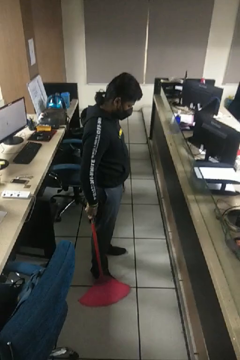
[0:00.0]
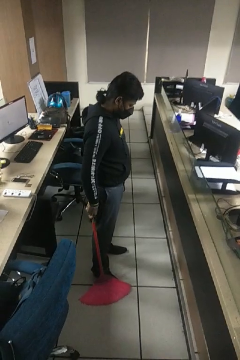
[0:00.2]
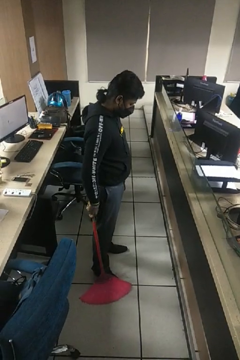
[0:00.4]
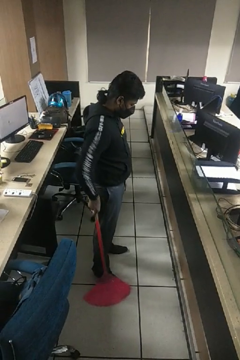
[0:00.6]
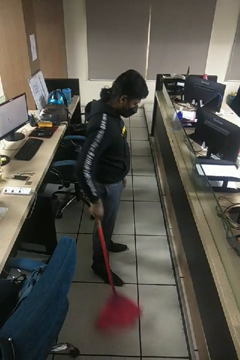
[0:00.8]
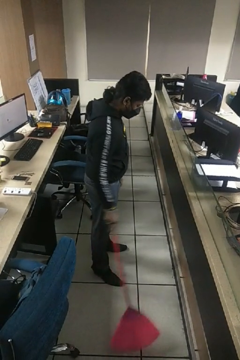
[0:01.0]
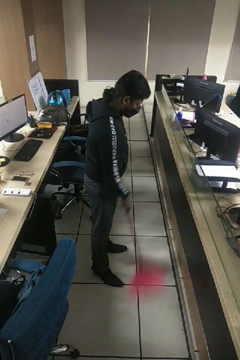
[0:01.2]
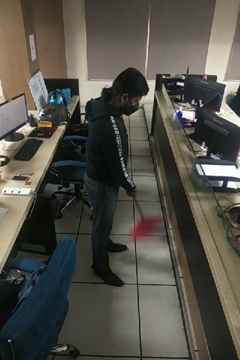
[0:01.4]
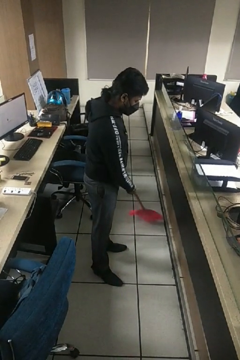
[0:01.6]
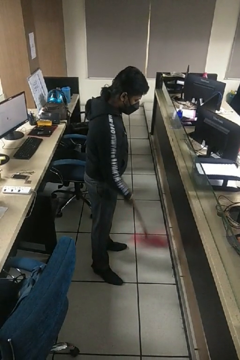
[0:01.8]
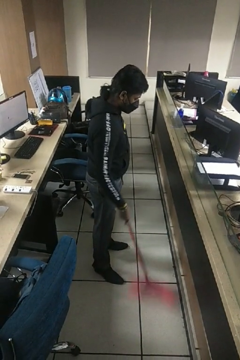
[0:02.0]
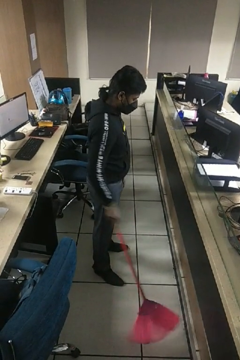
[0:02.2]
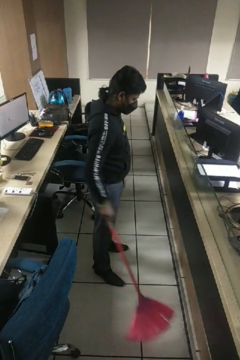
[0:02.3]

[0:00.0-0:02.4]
person sweeps floor

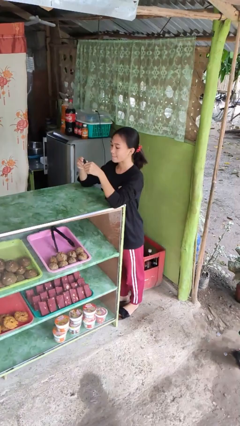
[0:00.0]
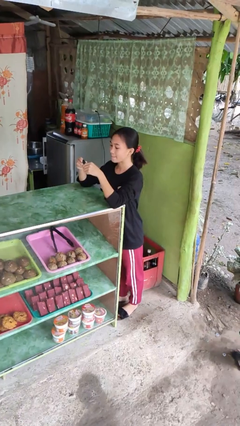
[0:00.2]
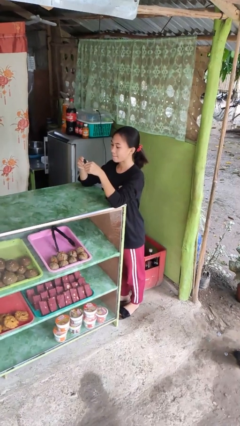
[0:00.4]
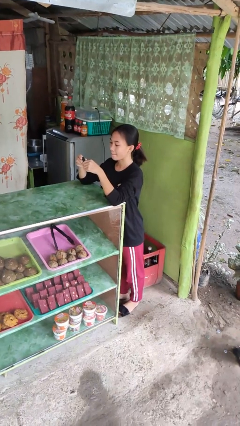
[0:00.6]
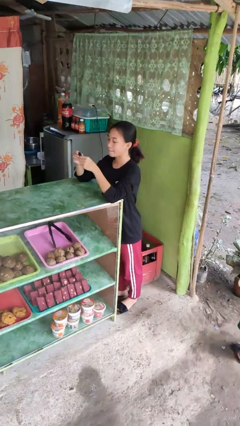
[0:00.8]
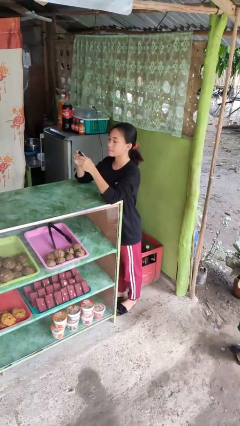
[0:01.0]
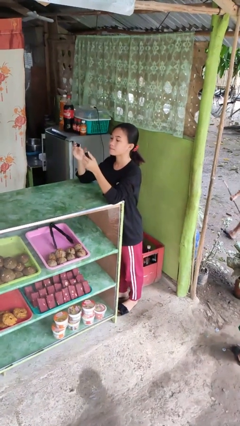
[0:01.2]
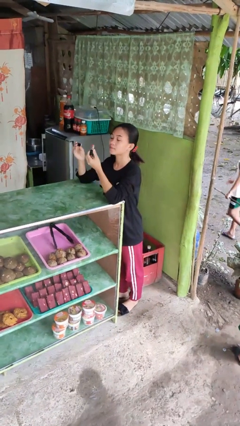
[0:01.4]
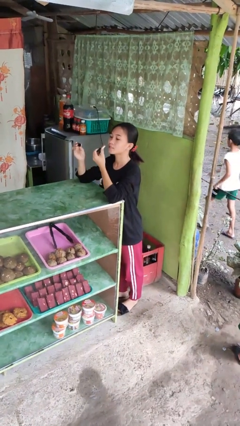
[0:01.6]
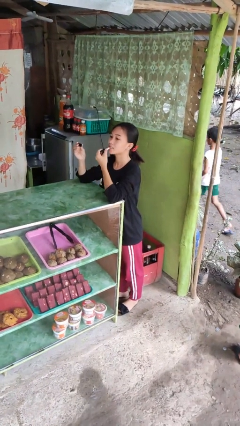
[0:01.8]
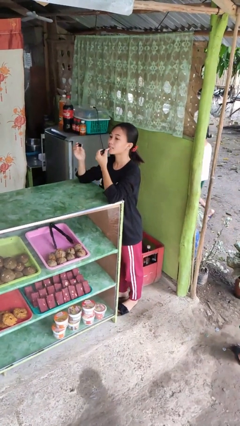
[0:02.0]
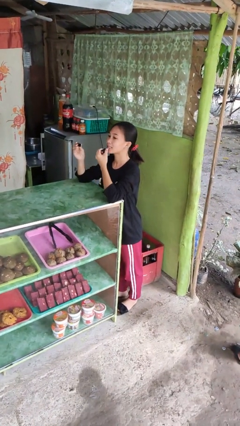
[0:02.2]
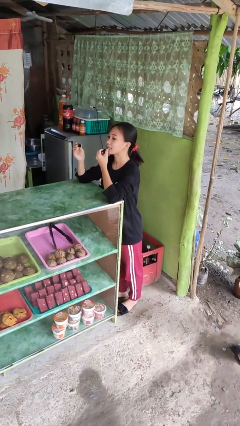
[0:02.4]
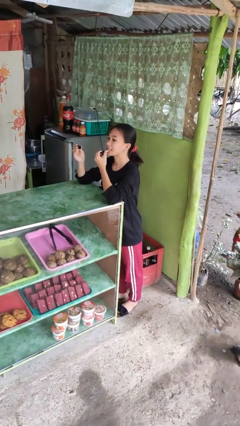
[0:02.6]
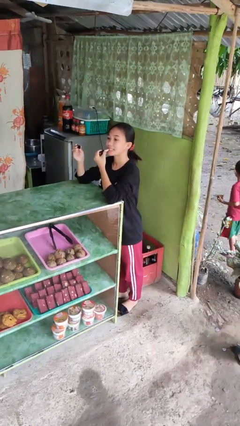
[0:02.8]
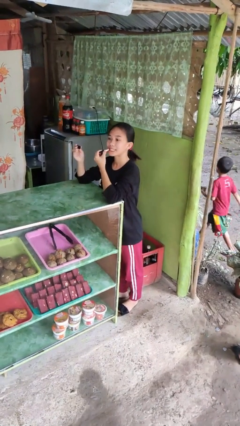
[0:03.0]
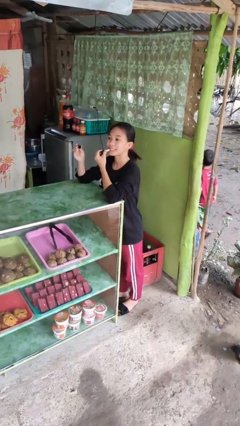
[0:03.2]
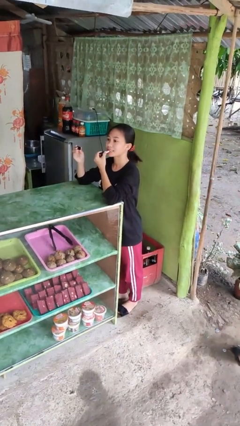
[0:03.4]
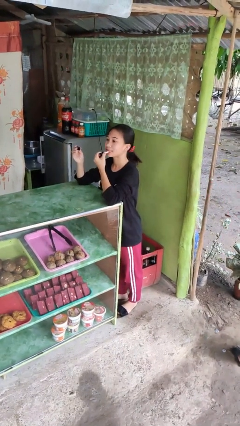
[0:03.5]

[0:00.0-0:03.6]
person applies lip makeup

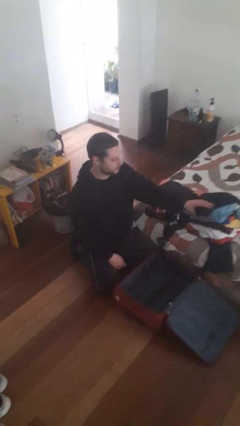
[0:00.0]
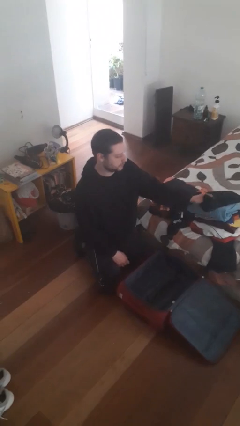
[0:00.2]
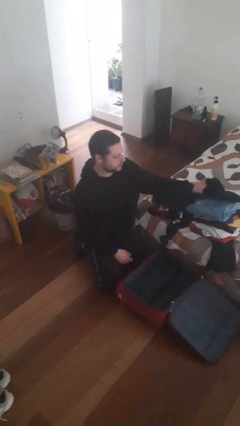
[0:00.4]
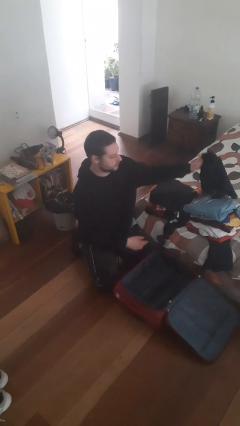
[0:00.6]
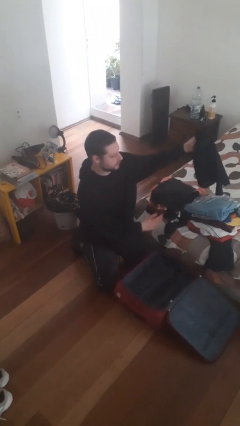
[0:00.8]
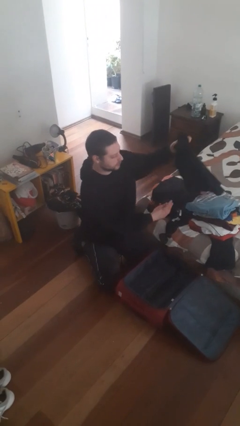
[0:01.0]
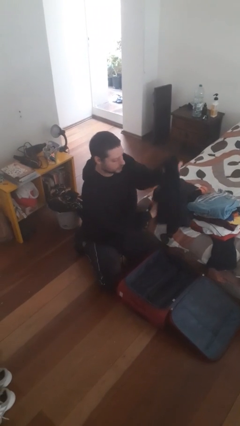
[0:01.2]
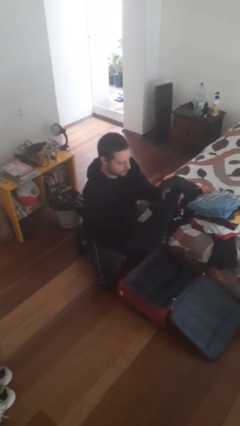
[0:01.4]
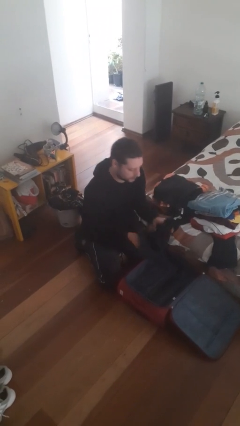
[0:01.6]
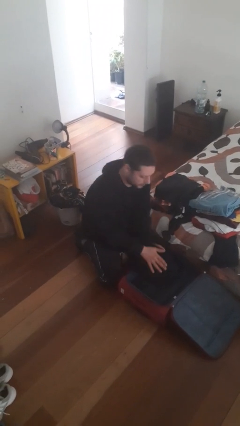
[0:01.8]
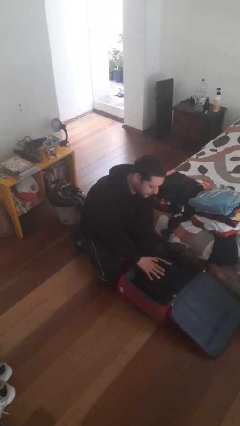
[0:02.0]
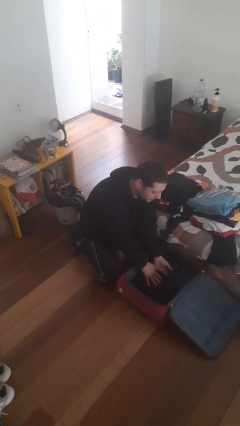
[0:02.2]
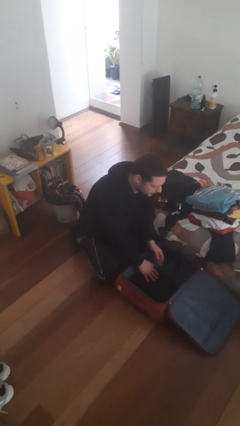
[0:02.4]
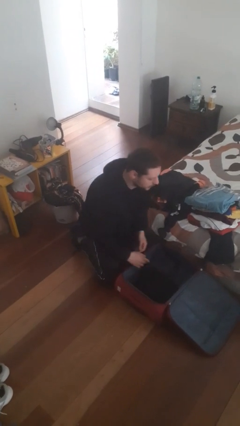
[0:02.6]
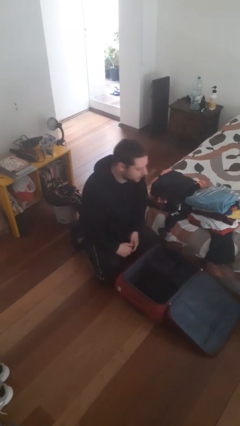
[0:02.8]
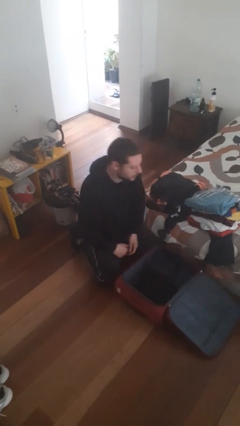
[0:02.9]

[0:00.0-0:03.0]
person loads clothes into suitcase

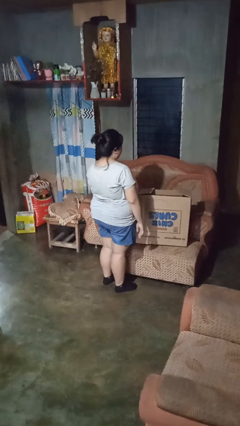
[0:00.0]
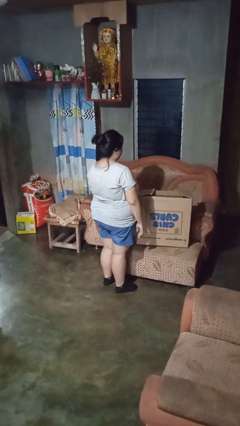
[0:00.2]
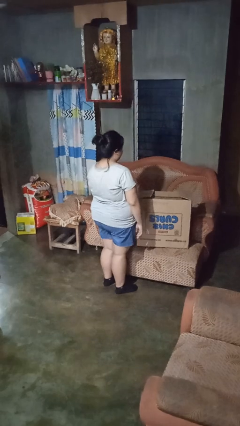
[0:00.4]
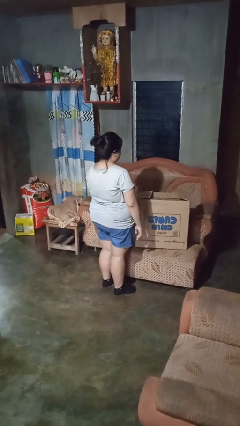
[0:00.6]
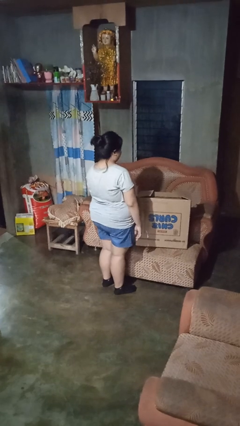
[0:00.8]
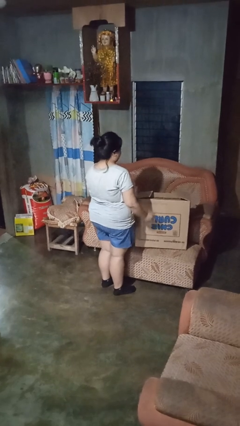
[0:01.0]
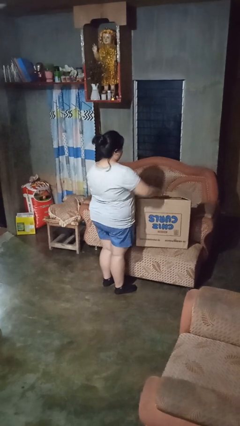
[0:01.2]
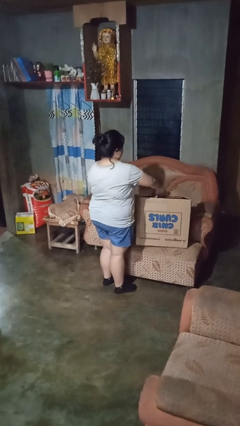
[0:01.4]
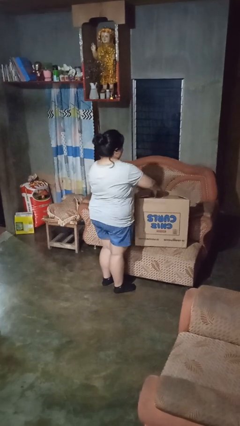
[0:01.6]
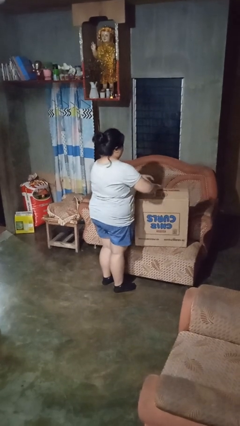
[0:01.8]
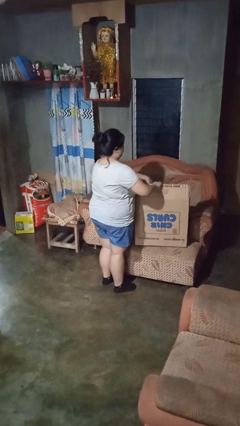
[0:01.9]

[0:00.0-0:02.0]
person opens box

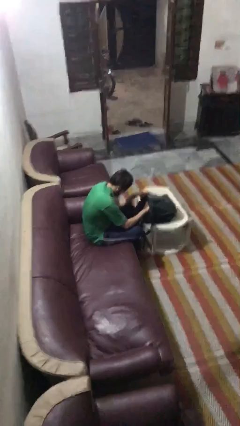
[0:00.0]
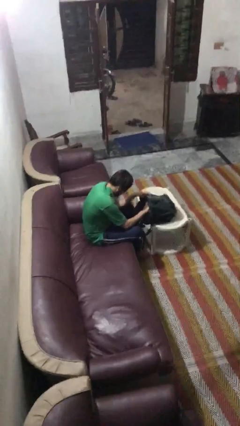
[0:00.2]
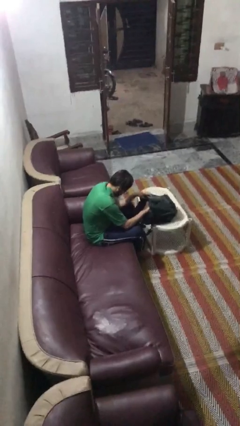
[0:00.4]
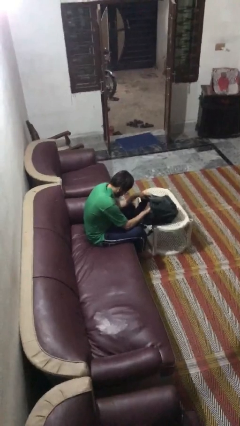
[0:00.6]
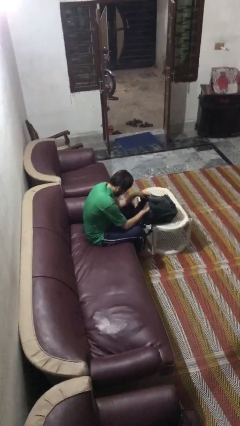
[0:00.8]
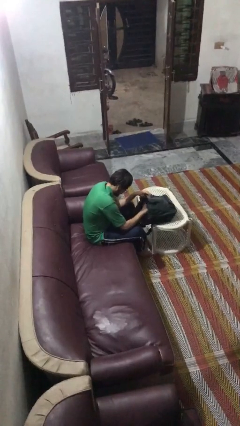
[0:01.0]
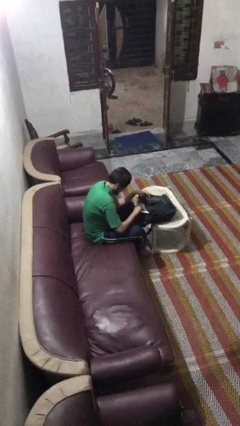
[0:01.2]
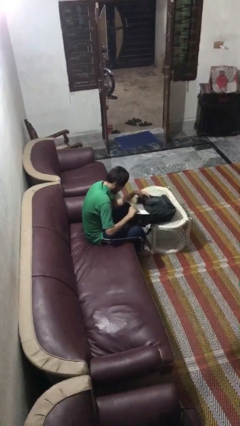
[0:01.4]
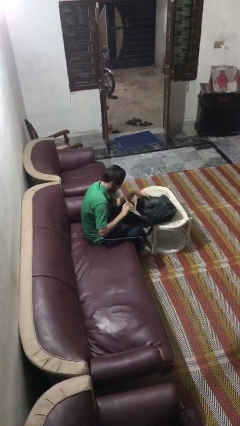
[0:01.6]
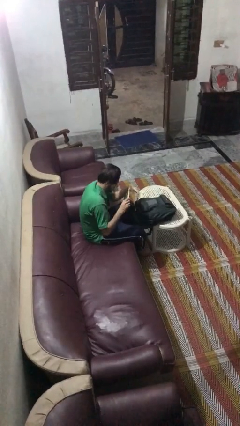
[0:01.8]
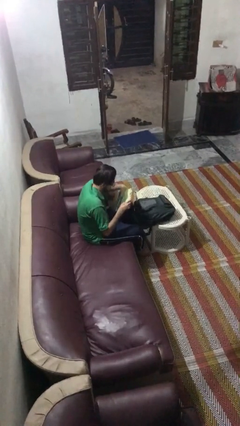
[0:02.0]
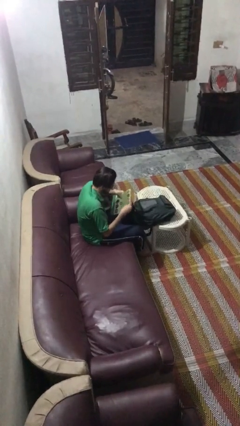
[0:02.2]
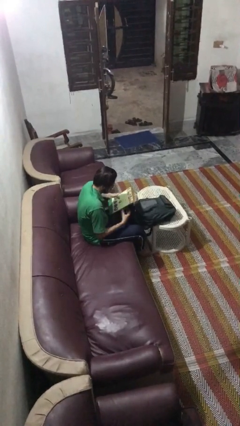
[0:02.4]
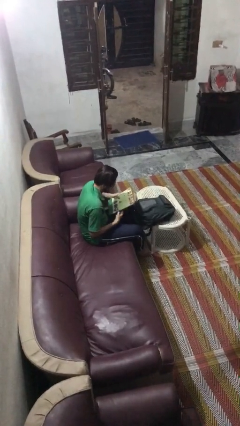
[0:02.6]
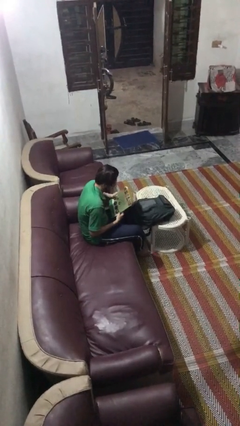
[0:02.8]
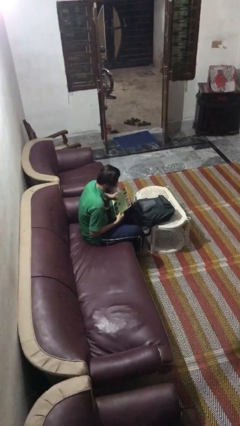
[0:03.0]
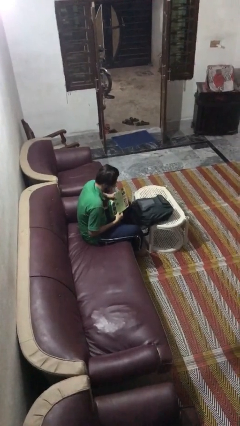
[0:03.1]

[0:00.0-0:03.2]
person takes object from backpack

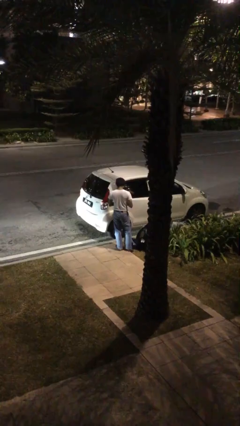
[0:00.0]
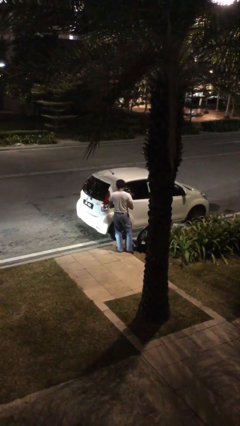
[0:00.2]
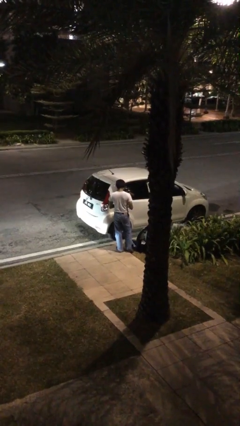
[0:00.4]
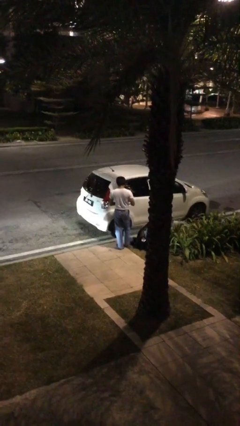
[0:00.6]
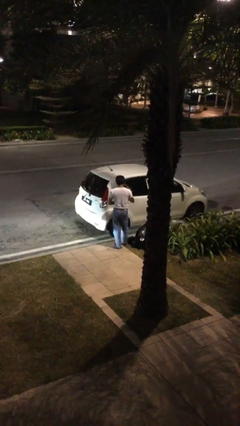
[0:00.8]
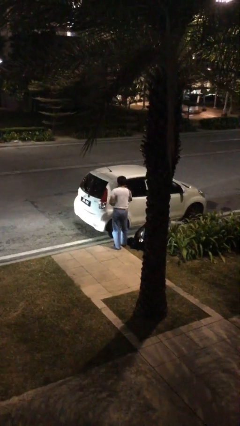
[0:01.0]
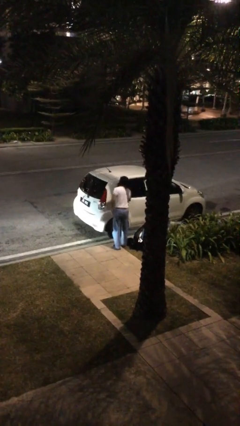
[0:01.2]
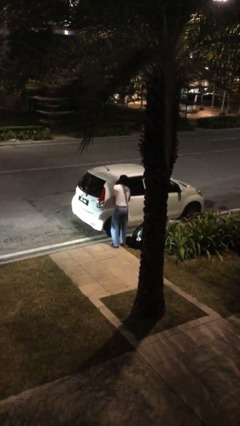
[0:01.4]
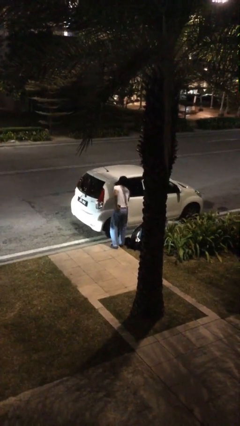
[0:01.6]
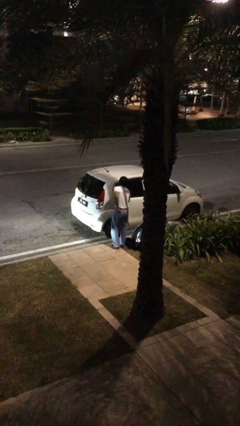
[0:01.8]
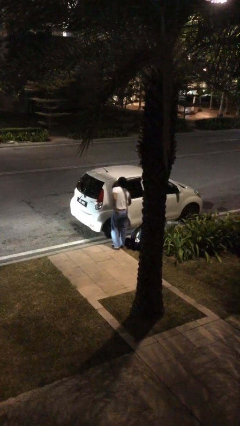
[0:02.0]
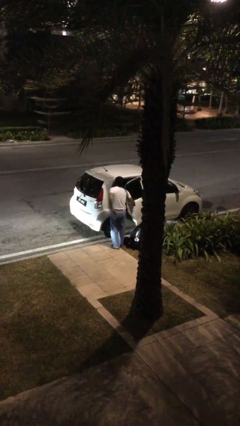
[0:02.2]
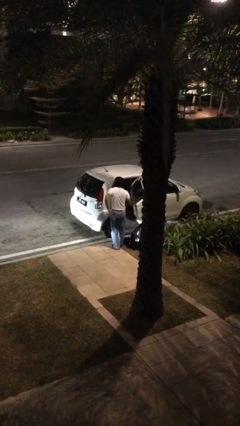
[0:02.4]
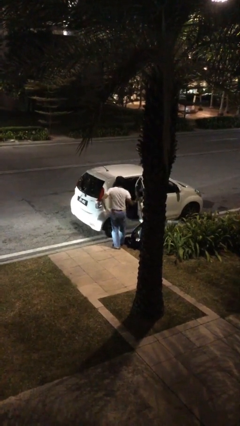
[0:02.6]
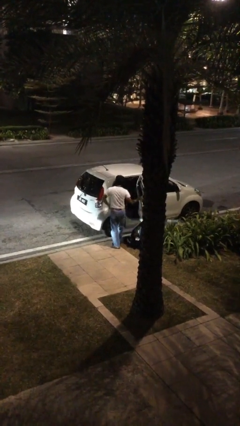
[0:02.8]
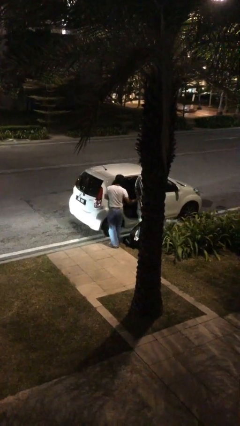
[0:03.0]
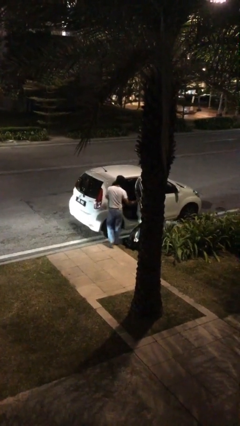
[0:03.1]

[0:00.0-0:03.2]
person opens car door

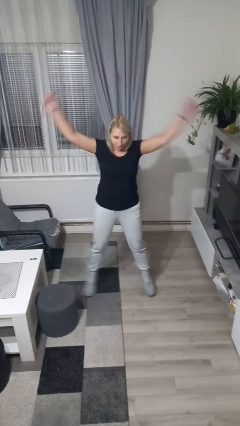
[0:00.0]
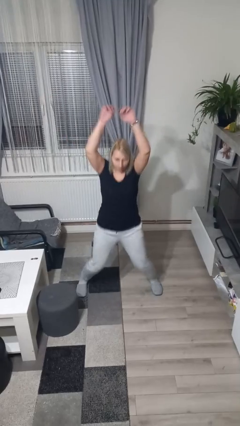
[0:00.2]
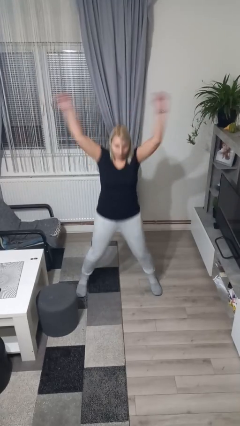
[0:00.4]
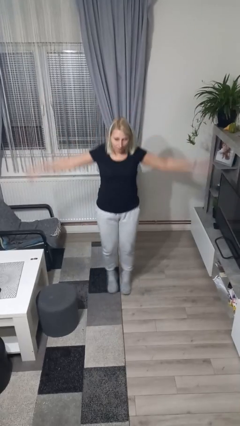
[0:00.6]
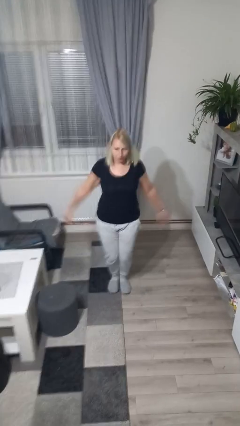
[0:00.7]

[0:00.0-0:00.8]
person exercises with jumping jacks
